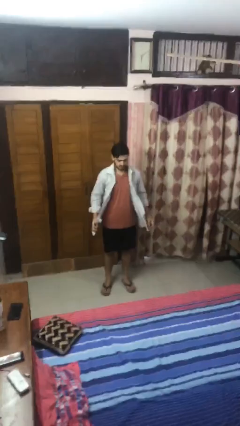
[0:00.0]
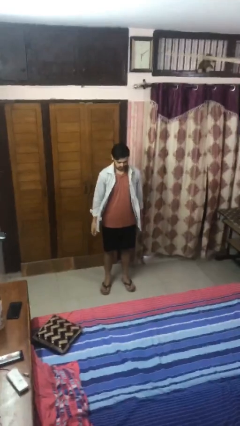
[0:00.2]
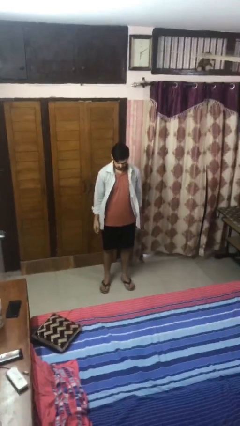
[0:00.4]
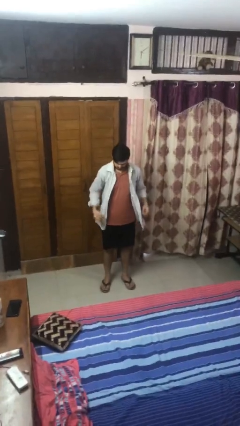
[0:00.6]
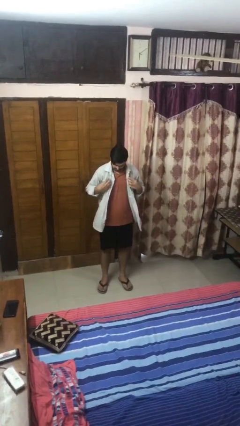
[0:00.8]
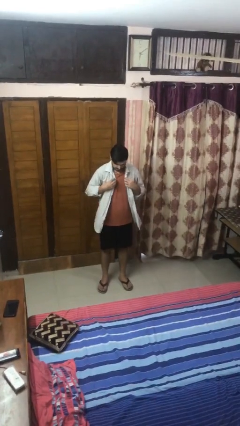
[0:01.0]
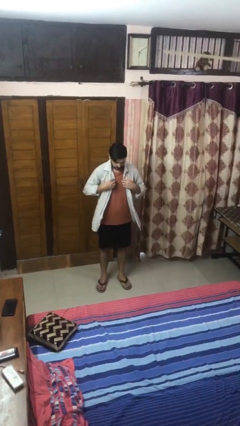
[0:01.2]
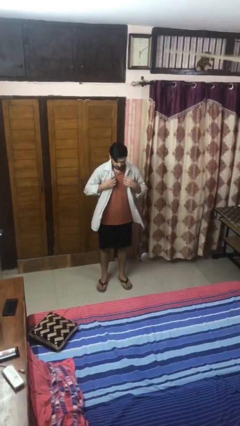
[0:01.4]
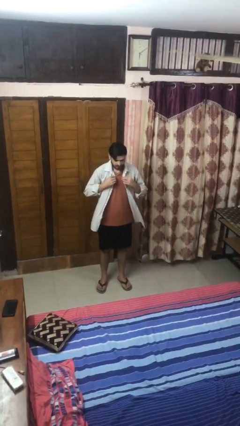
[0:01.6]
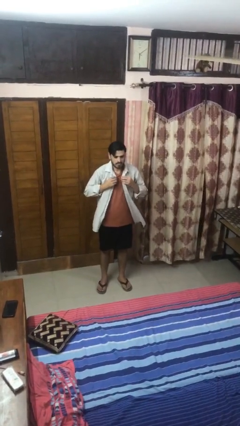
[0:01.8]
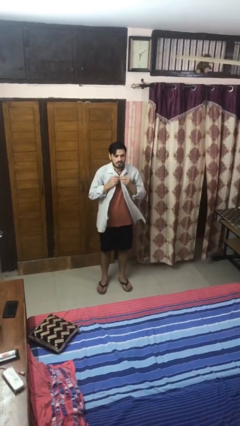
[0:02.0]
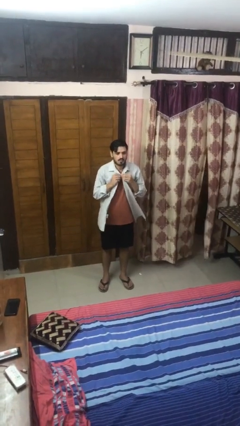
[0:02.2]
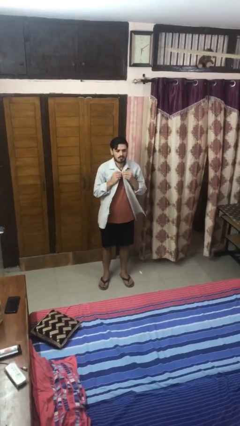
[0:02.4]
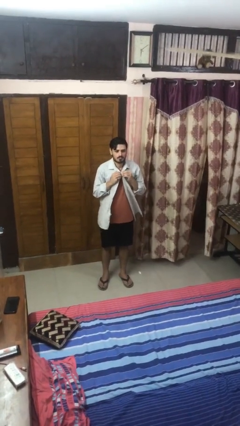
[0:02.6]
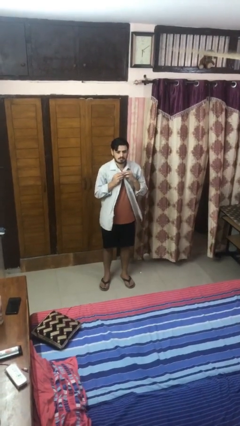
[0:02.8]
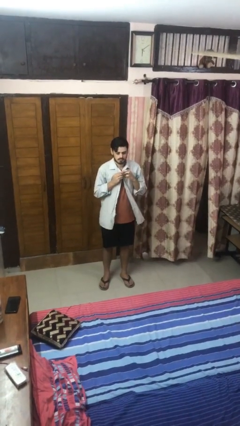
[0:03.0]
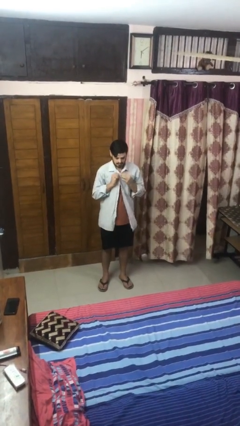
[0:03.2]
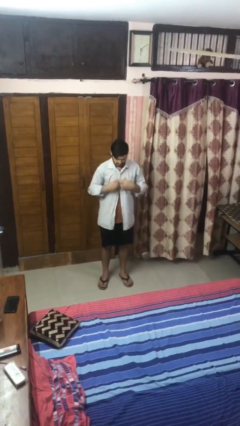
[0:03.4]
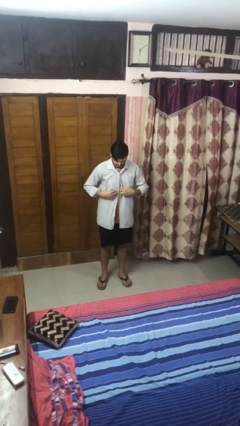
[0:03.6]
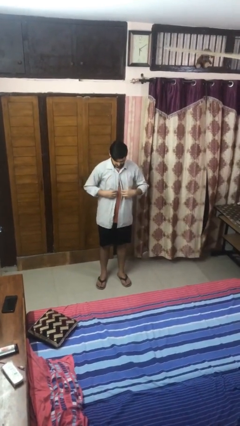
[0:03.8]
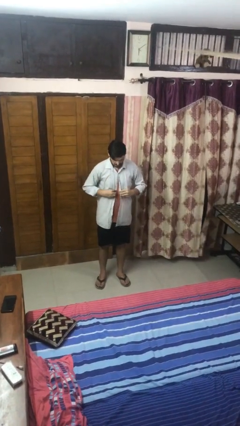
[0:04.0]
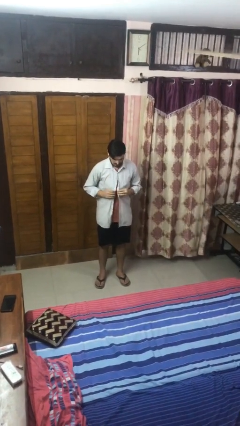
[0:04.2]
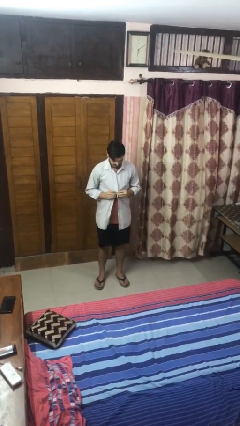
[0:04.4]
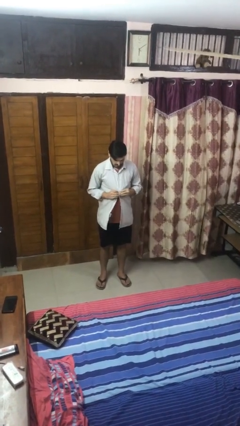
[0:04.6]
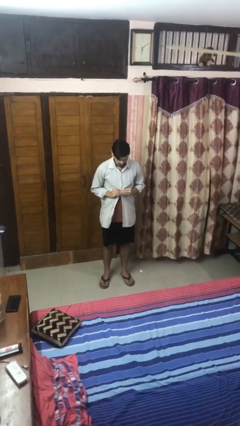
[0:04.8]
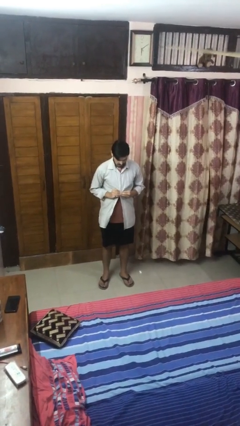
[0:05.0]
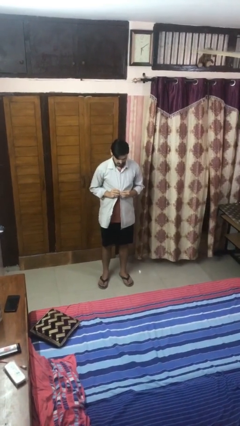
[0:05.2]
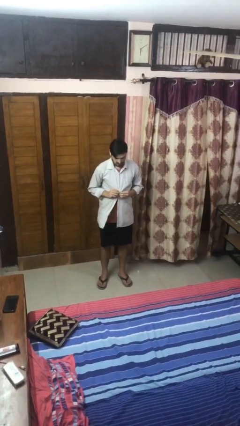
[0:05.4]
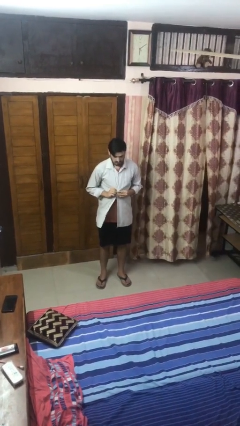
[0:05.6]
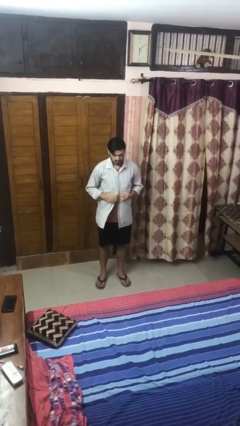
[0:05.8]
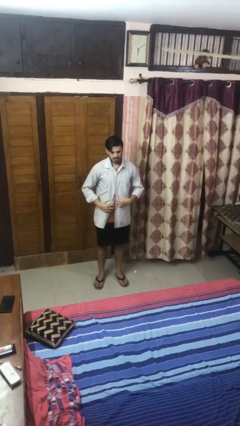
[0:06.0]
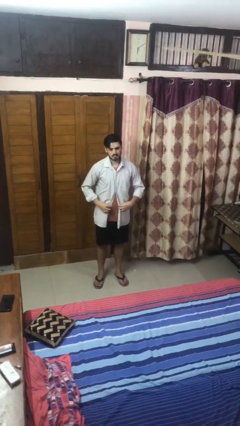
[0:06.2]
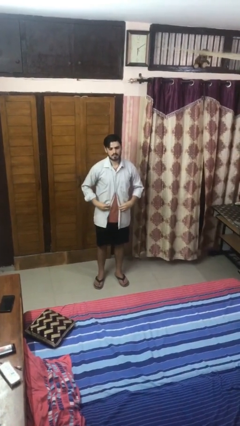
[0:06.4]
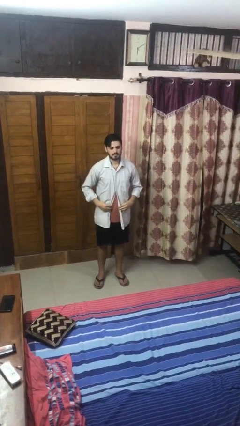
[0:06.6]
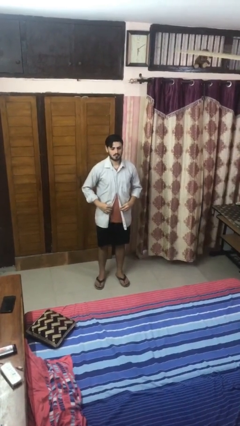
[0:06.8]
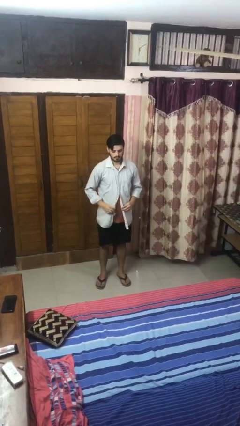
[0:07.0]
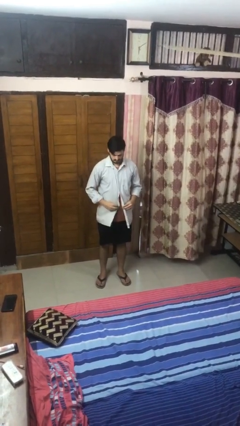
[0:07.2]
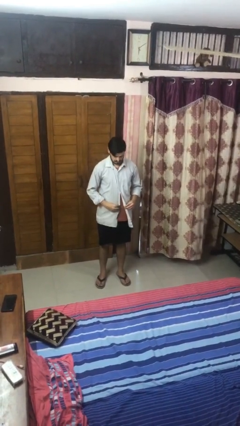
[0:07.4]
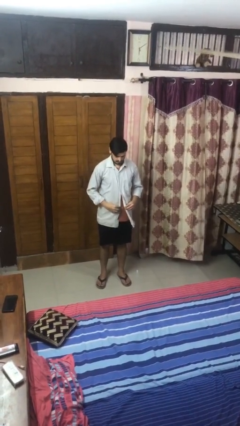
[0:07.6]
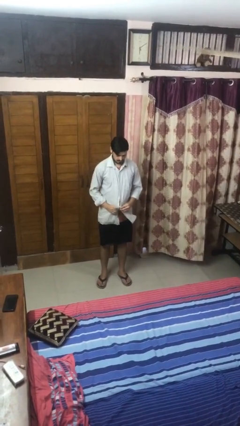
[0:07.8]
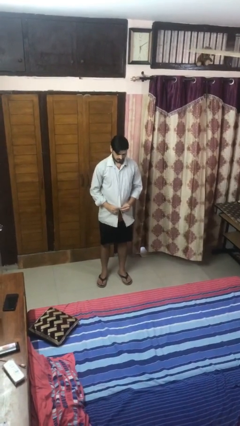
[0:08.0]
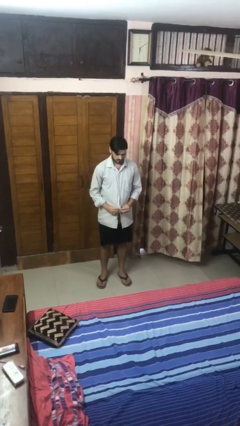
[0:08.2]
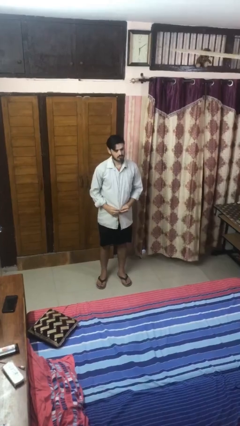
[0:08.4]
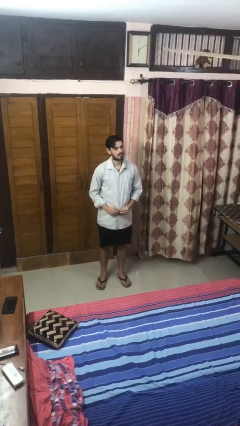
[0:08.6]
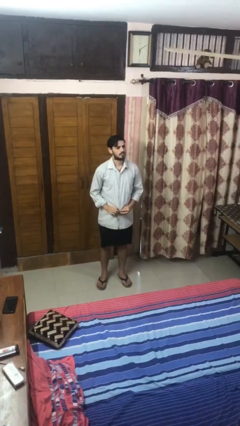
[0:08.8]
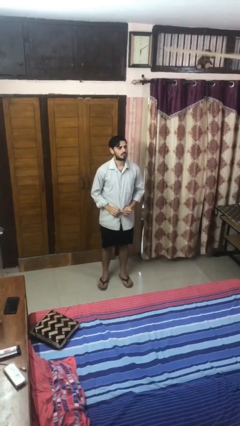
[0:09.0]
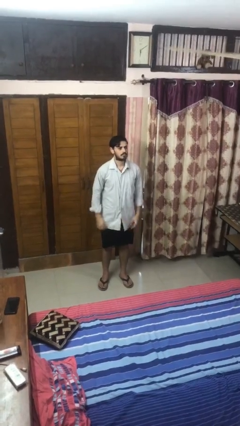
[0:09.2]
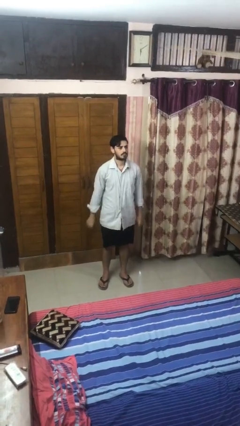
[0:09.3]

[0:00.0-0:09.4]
person buttons shirt

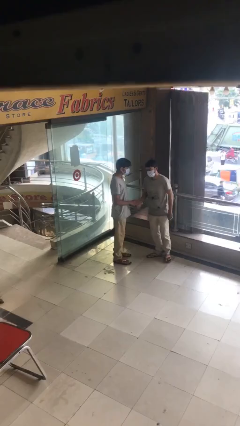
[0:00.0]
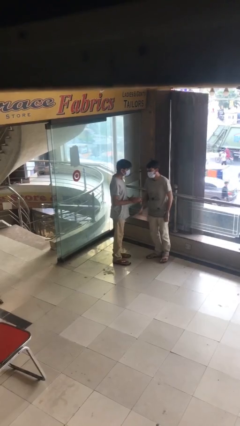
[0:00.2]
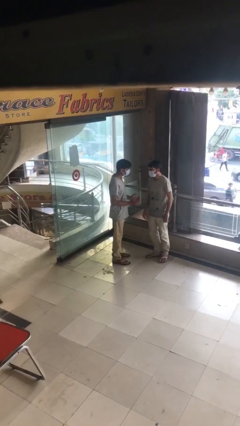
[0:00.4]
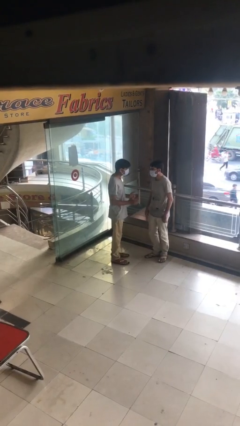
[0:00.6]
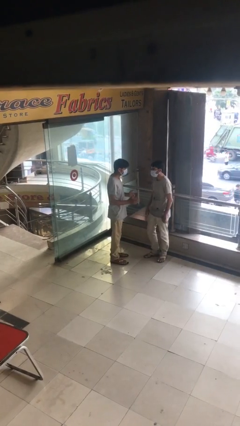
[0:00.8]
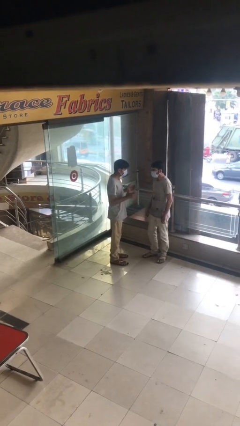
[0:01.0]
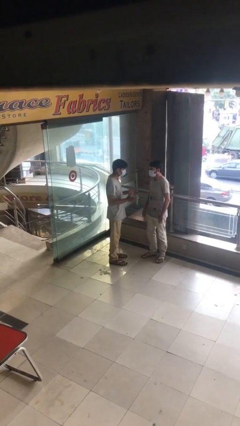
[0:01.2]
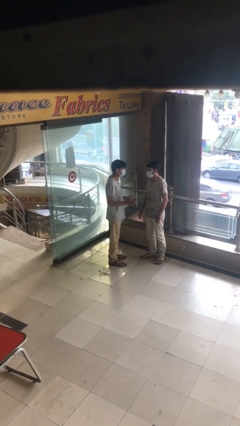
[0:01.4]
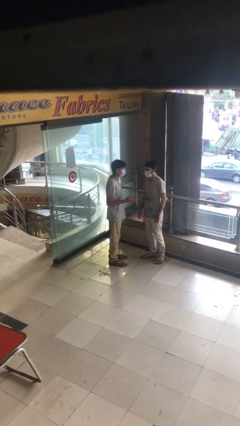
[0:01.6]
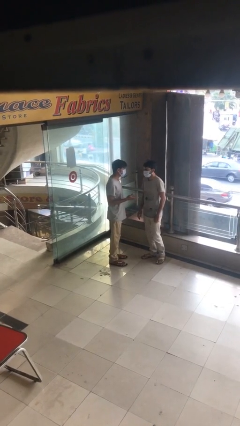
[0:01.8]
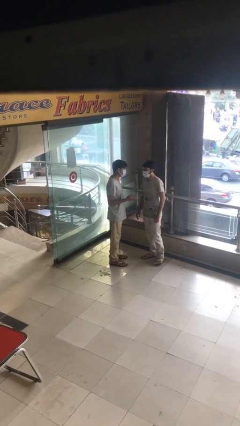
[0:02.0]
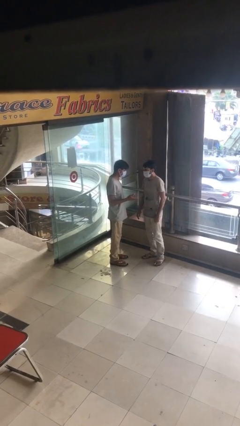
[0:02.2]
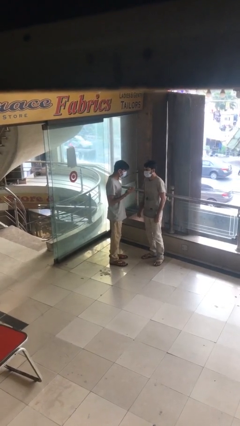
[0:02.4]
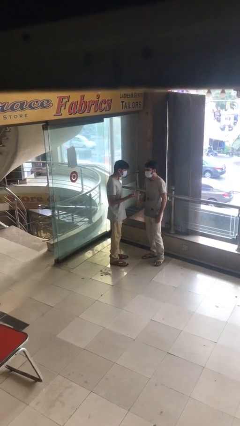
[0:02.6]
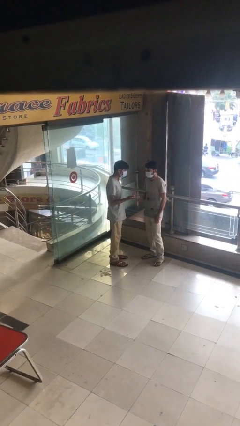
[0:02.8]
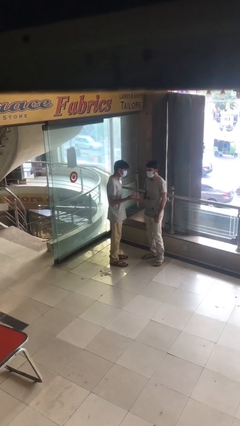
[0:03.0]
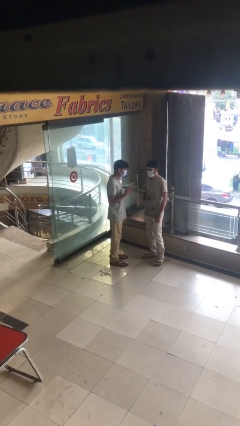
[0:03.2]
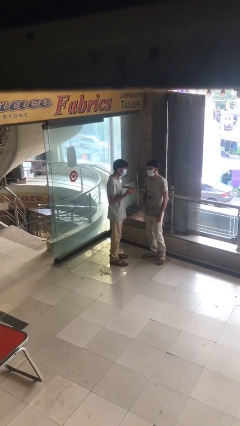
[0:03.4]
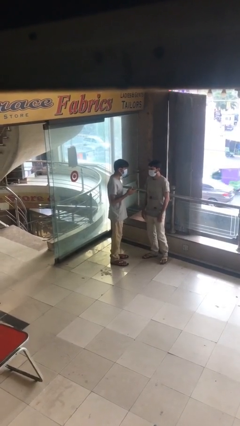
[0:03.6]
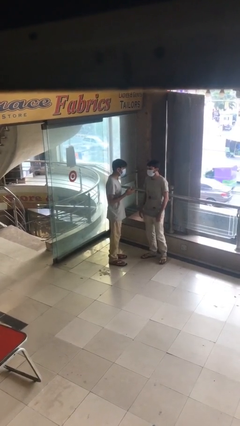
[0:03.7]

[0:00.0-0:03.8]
person talks to person

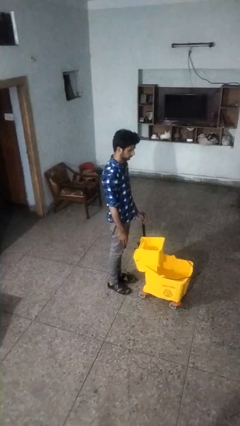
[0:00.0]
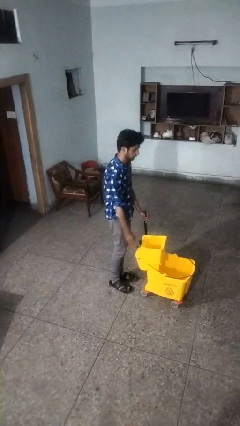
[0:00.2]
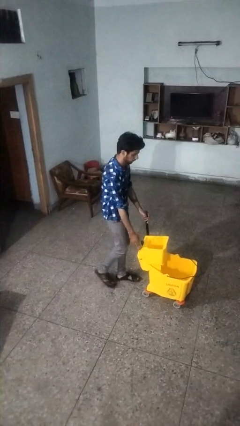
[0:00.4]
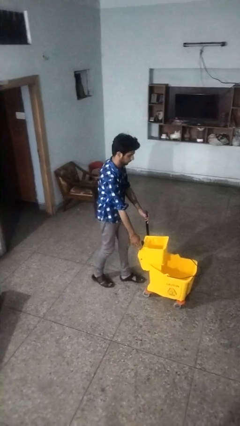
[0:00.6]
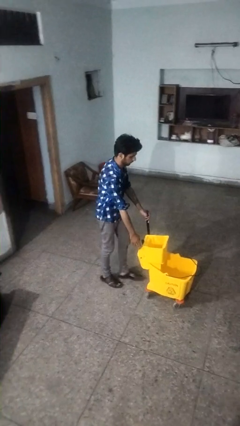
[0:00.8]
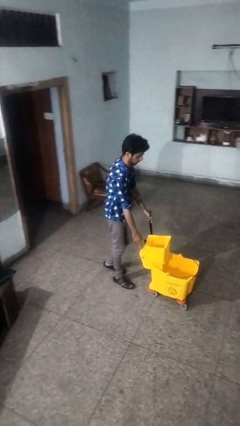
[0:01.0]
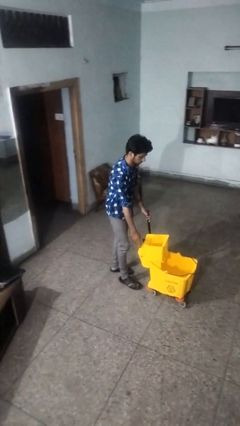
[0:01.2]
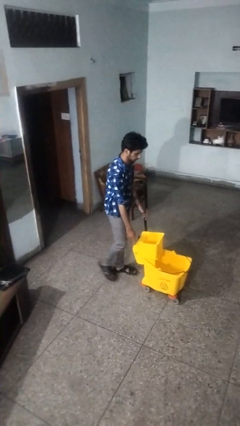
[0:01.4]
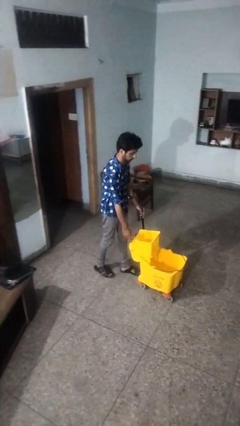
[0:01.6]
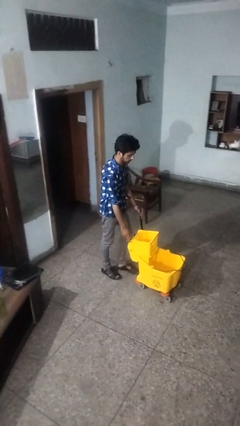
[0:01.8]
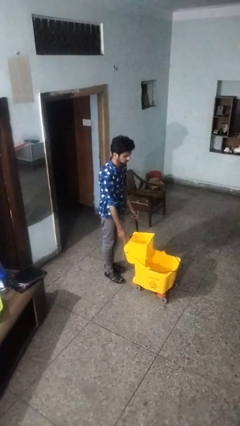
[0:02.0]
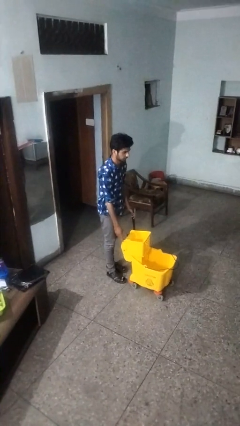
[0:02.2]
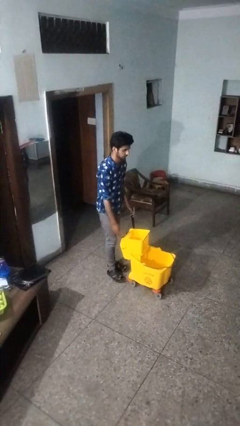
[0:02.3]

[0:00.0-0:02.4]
person pulls wheeled cart

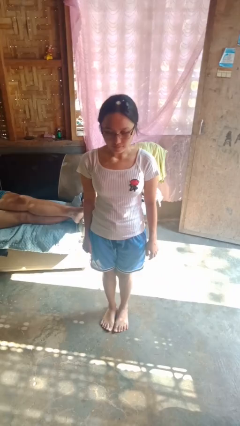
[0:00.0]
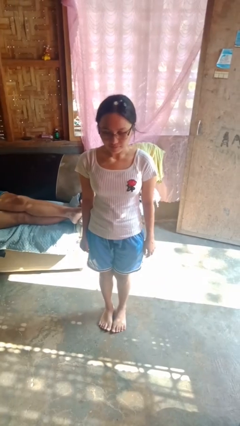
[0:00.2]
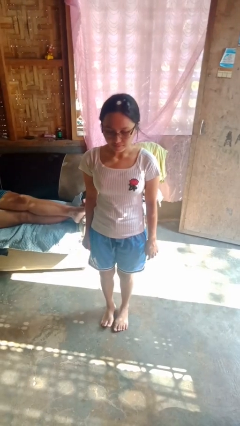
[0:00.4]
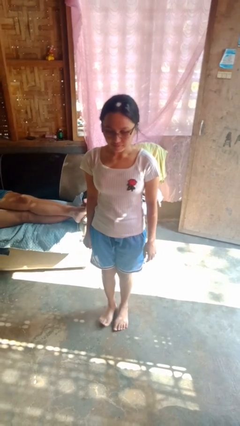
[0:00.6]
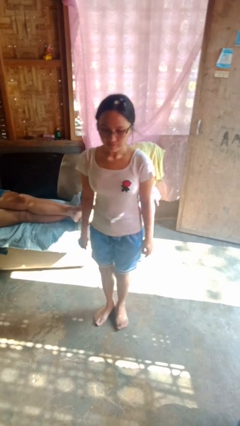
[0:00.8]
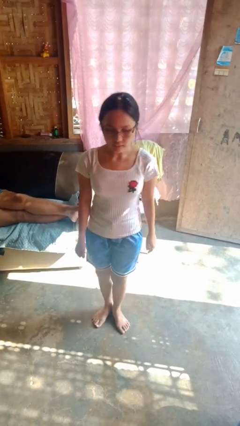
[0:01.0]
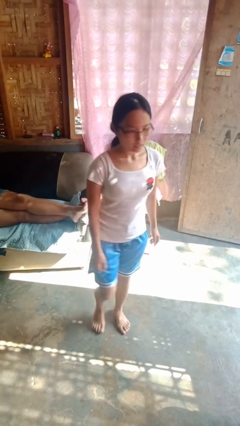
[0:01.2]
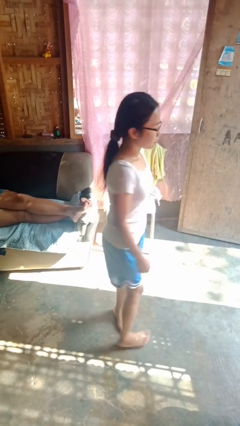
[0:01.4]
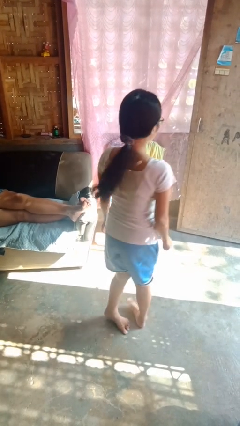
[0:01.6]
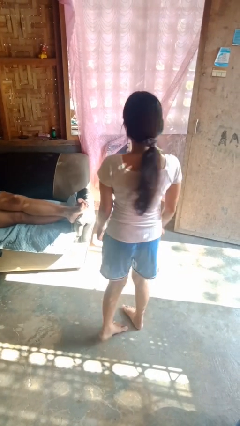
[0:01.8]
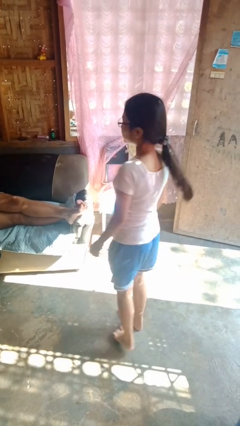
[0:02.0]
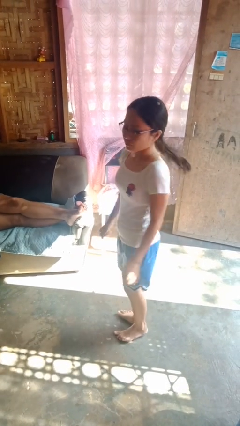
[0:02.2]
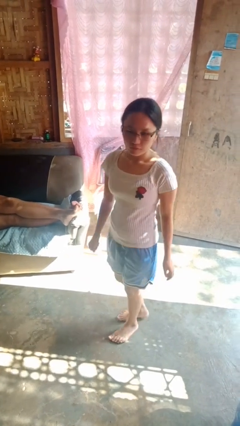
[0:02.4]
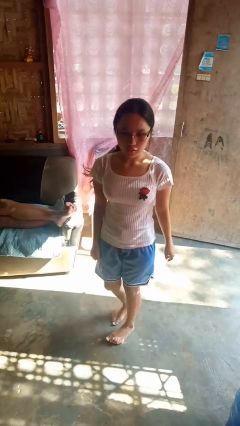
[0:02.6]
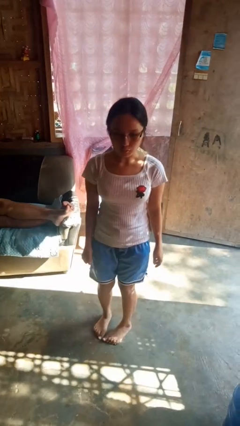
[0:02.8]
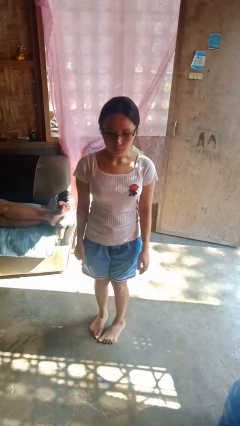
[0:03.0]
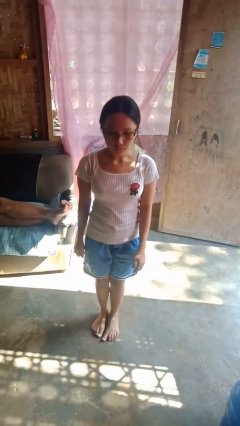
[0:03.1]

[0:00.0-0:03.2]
person twirls
